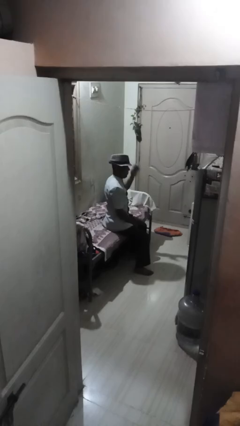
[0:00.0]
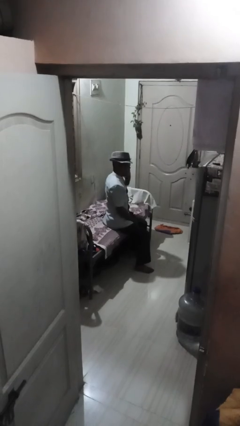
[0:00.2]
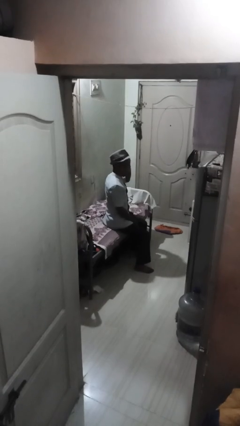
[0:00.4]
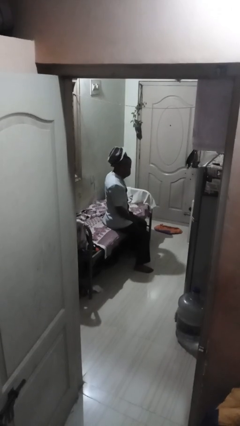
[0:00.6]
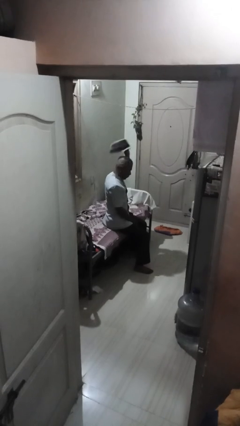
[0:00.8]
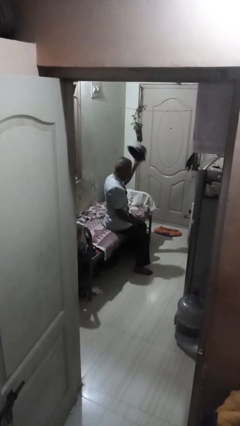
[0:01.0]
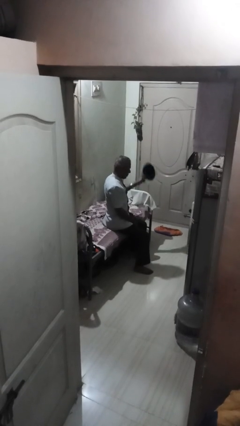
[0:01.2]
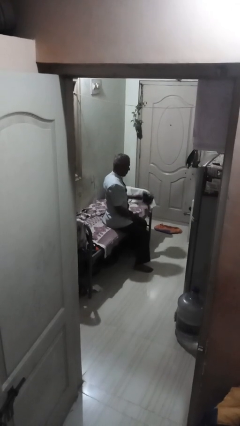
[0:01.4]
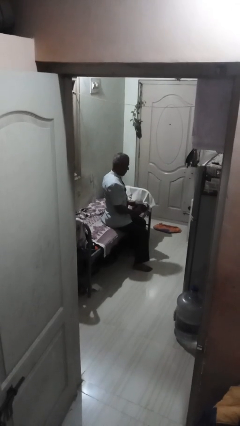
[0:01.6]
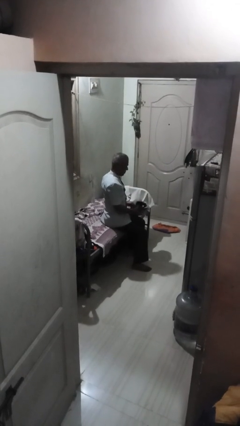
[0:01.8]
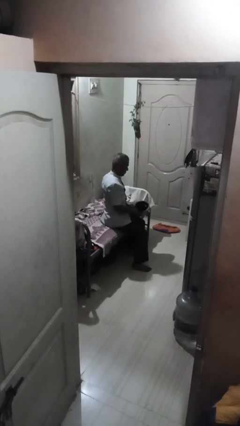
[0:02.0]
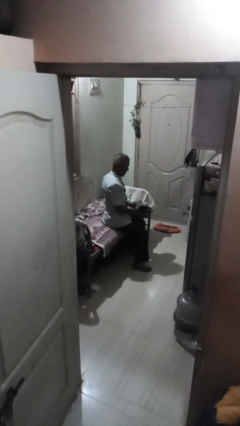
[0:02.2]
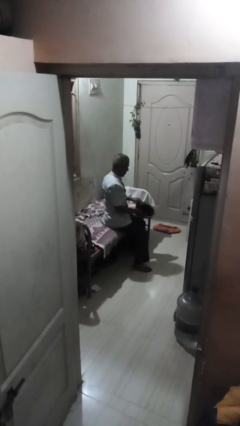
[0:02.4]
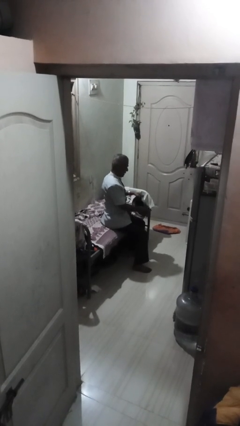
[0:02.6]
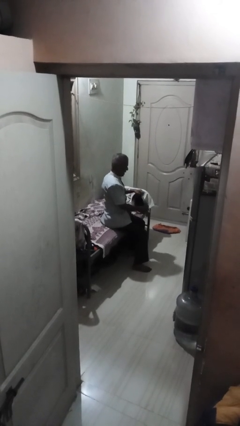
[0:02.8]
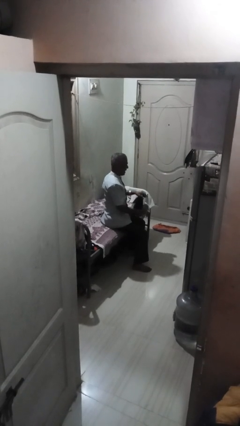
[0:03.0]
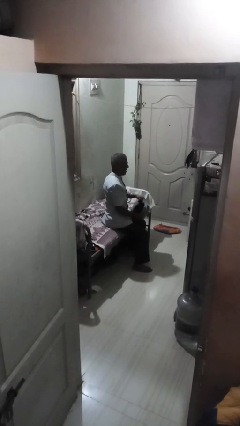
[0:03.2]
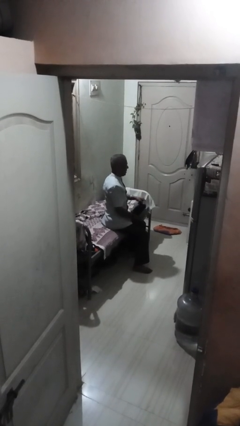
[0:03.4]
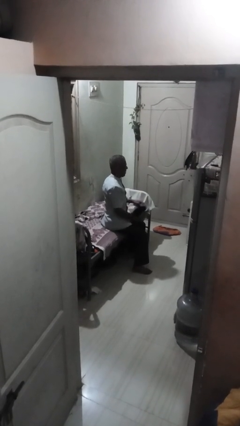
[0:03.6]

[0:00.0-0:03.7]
person takes off hat

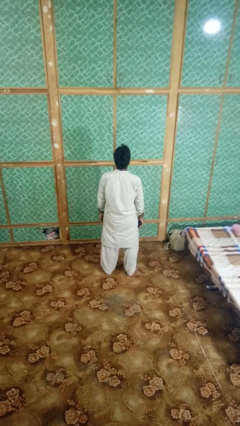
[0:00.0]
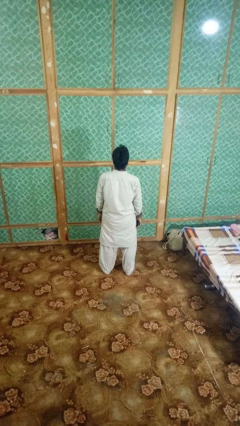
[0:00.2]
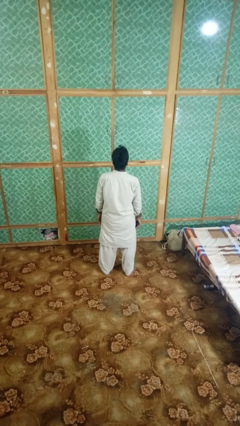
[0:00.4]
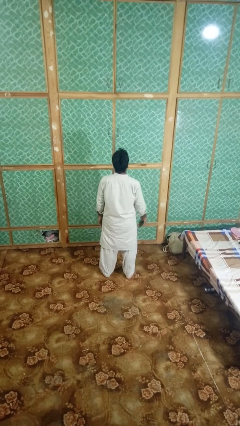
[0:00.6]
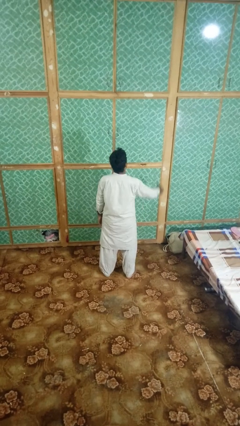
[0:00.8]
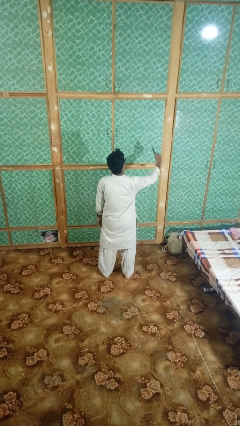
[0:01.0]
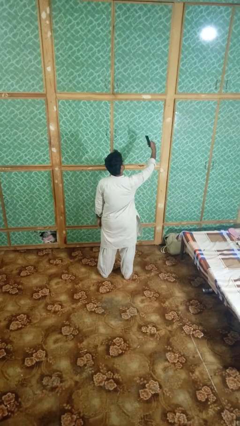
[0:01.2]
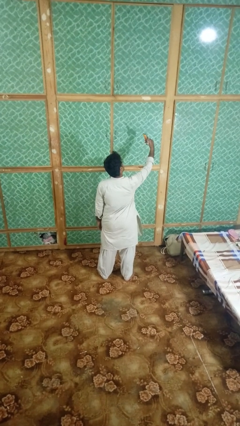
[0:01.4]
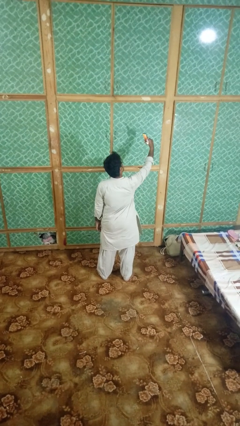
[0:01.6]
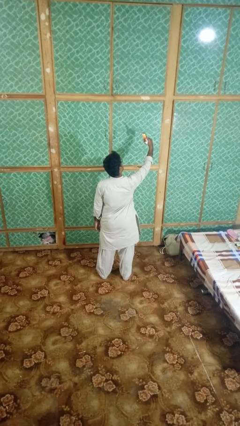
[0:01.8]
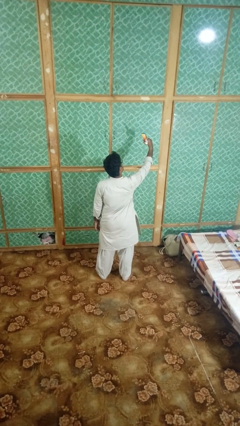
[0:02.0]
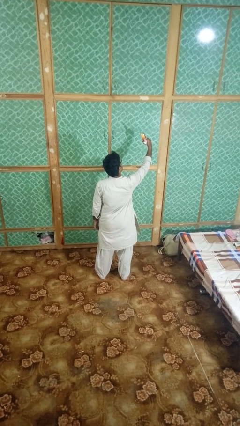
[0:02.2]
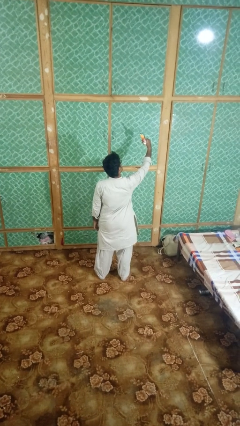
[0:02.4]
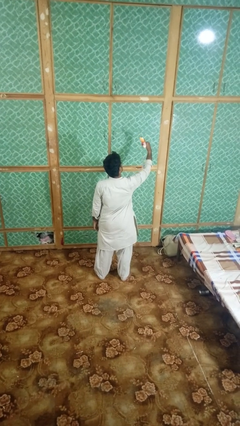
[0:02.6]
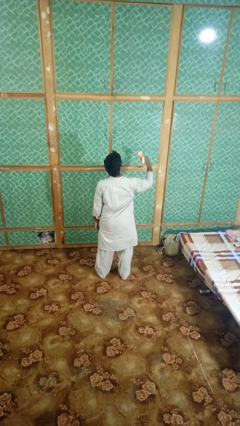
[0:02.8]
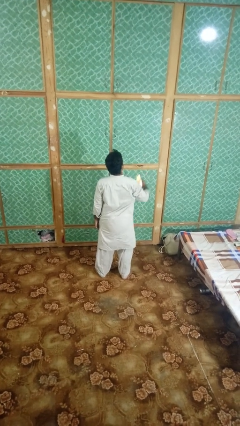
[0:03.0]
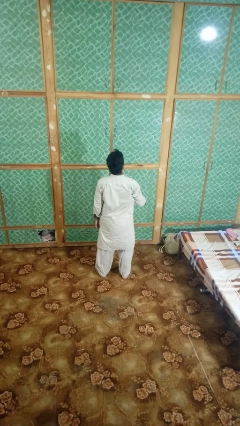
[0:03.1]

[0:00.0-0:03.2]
person takes selfie

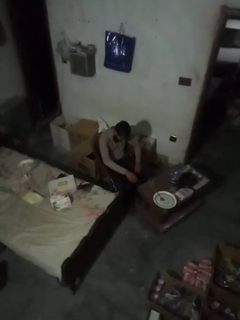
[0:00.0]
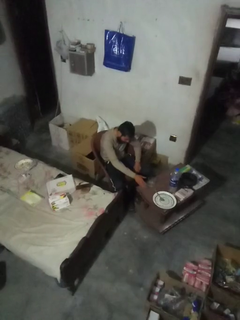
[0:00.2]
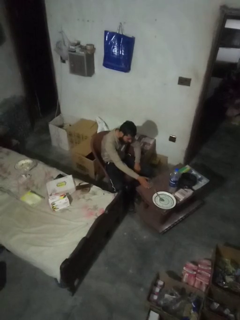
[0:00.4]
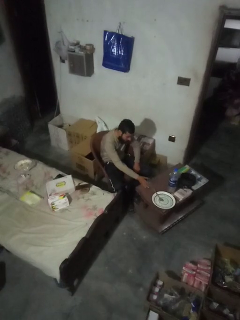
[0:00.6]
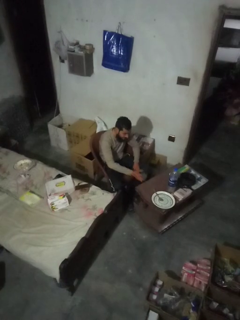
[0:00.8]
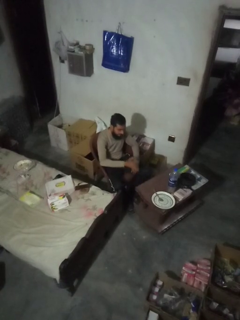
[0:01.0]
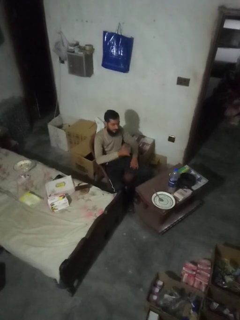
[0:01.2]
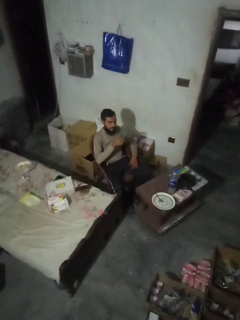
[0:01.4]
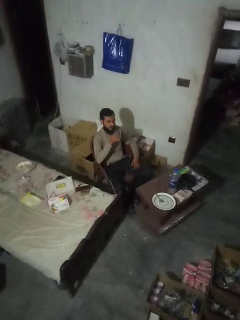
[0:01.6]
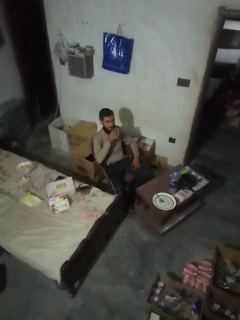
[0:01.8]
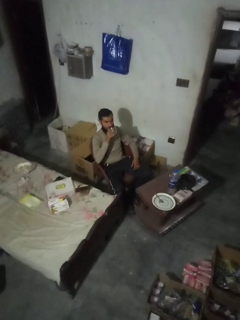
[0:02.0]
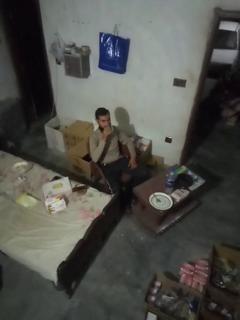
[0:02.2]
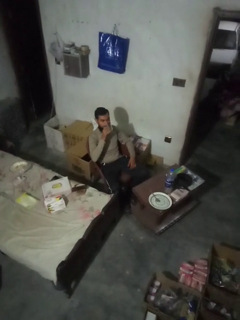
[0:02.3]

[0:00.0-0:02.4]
person picks up object from table

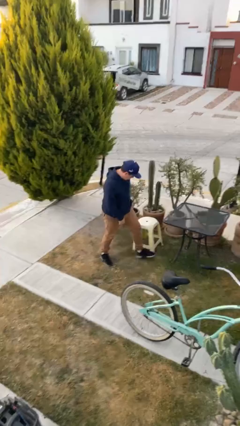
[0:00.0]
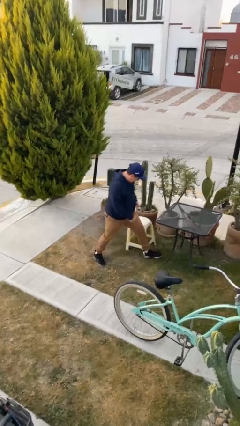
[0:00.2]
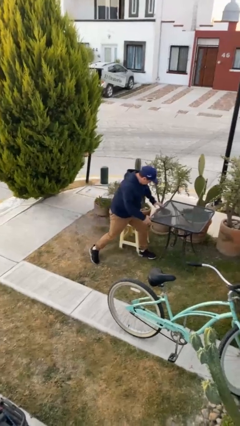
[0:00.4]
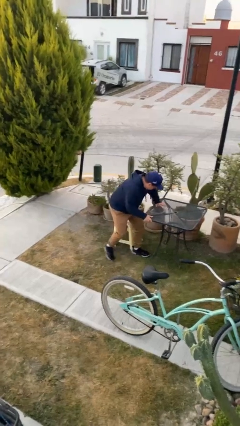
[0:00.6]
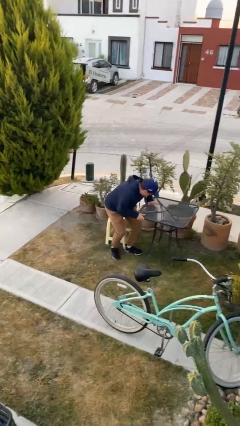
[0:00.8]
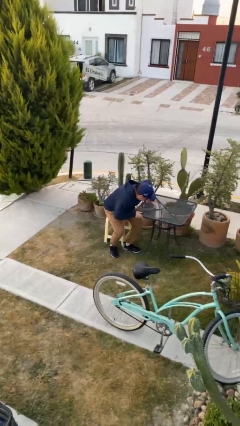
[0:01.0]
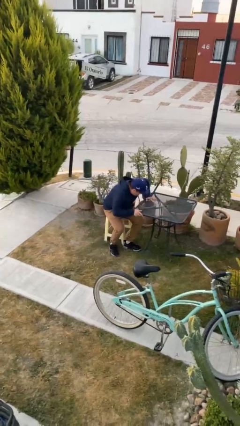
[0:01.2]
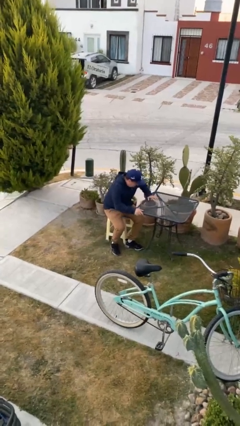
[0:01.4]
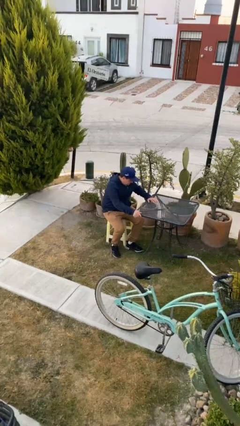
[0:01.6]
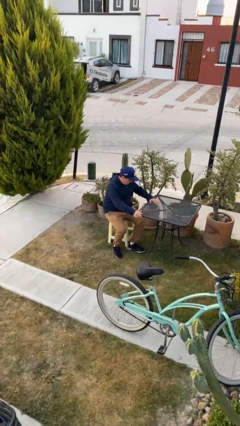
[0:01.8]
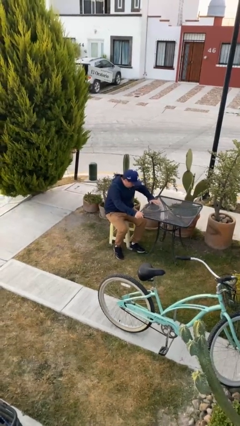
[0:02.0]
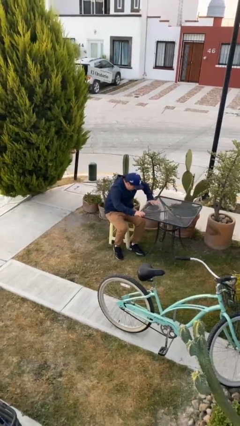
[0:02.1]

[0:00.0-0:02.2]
person sits down

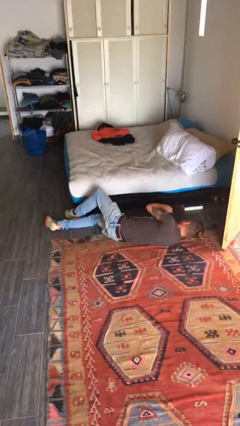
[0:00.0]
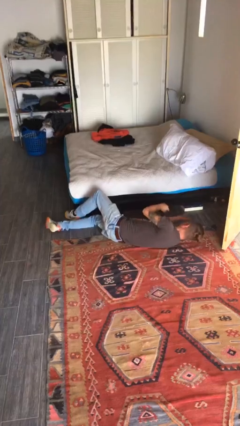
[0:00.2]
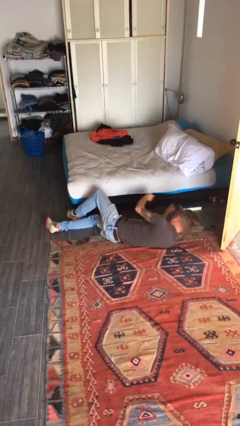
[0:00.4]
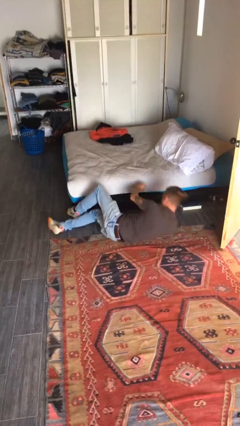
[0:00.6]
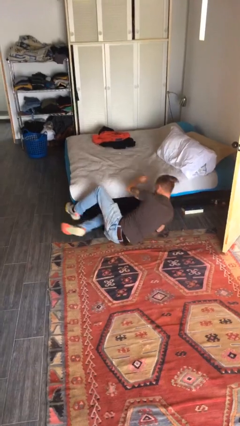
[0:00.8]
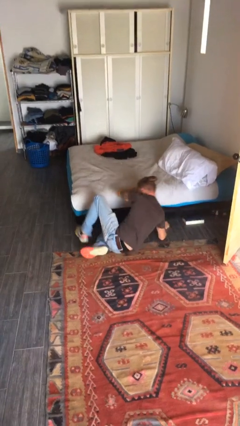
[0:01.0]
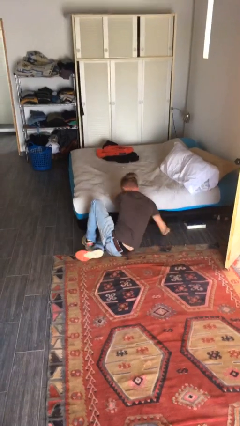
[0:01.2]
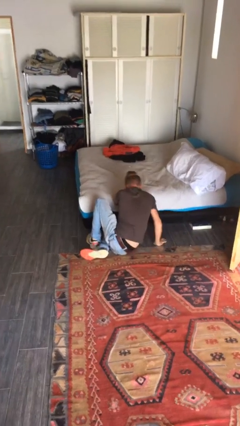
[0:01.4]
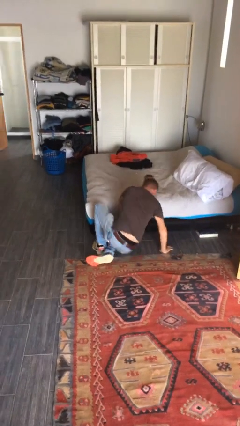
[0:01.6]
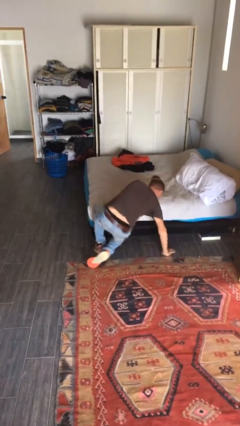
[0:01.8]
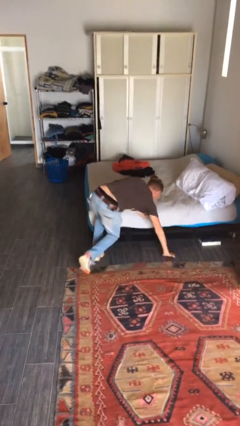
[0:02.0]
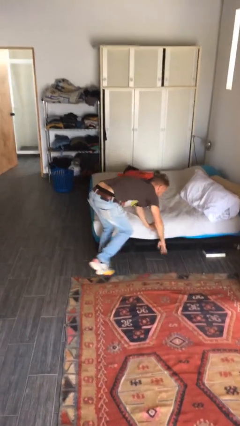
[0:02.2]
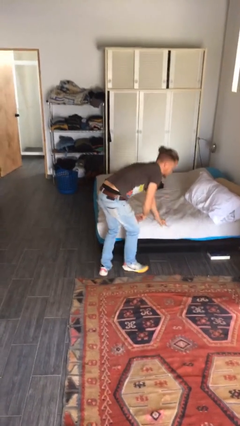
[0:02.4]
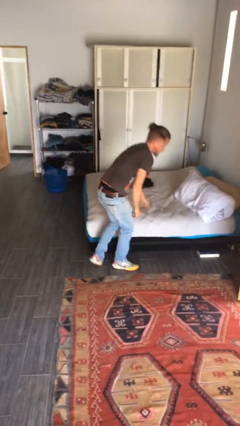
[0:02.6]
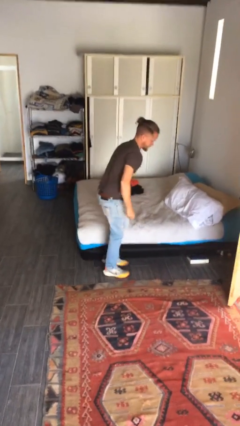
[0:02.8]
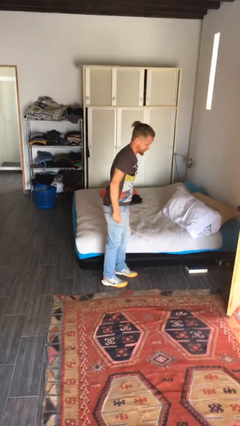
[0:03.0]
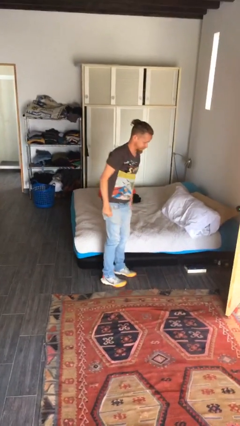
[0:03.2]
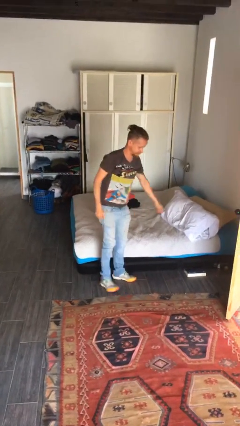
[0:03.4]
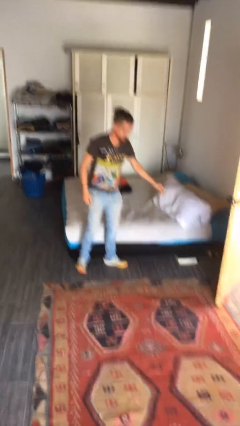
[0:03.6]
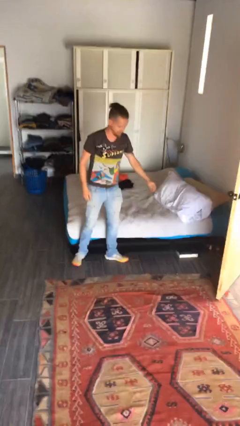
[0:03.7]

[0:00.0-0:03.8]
person stands up from floor

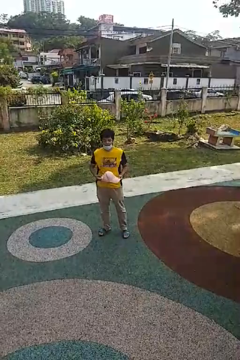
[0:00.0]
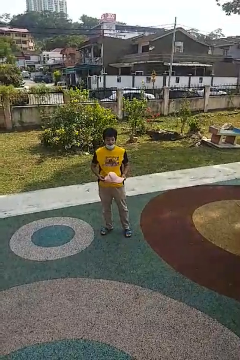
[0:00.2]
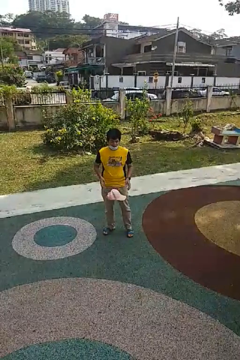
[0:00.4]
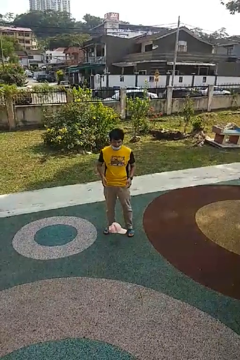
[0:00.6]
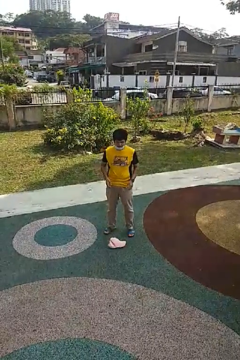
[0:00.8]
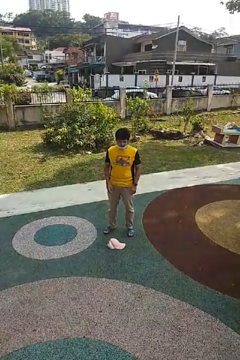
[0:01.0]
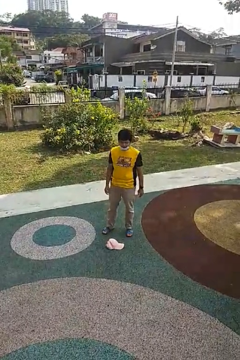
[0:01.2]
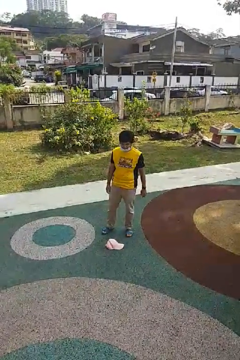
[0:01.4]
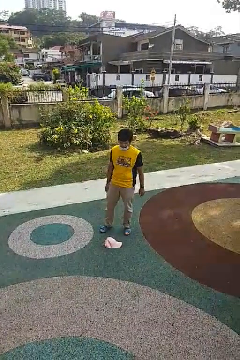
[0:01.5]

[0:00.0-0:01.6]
person drops object

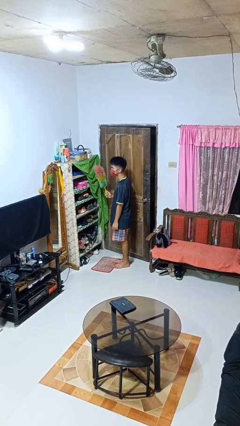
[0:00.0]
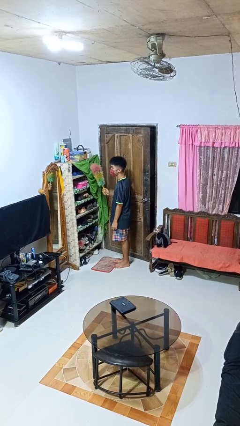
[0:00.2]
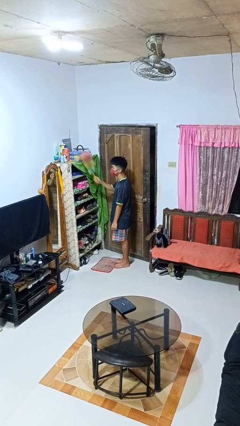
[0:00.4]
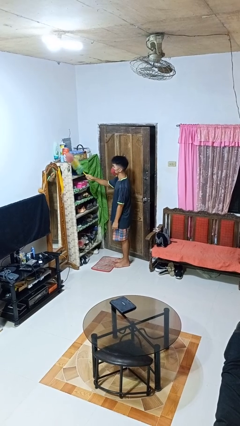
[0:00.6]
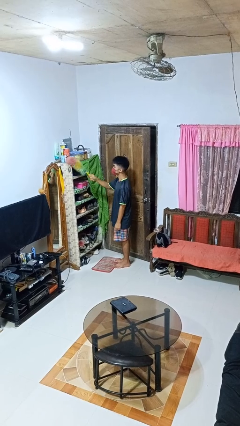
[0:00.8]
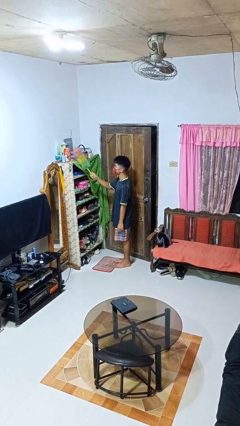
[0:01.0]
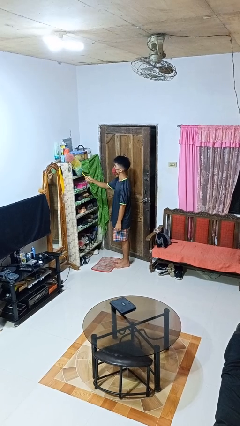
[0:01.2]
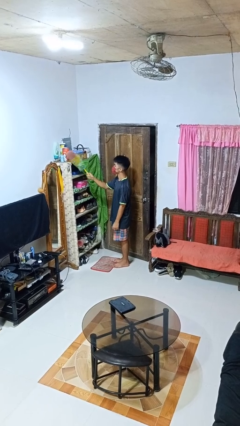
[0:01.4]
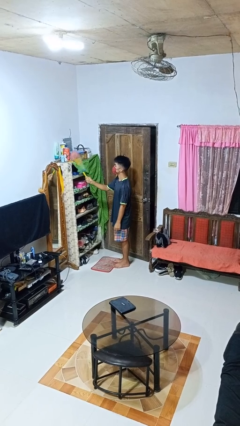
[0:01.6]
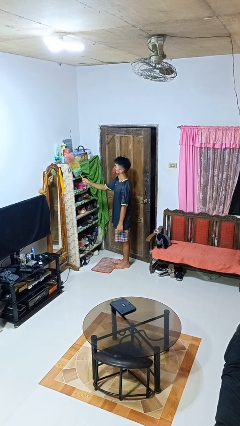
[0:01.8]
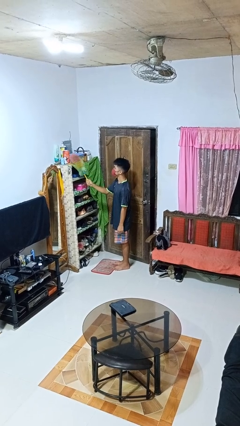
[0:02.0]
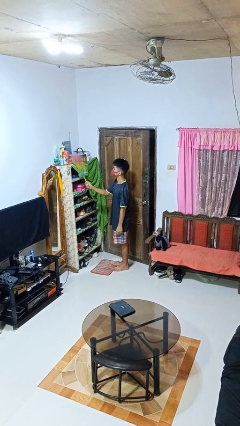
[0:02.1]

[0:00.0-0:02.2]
person dusts furniture
